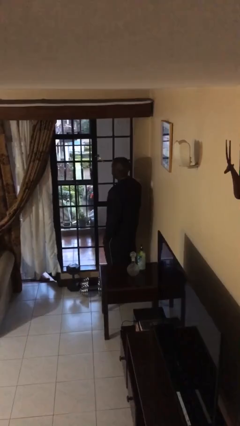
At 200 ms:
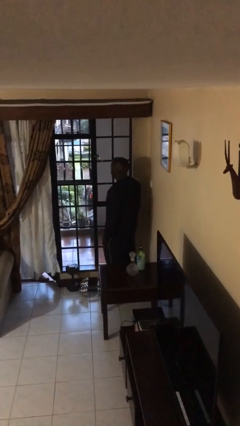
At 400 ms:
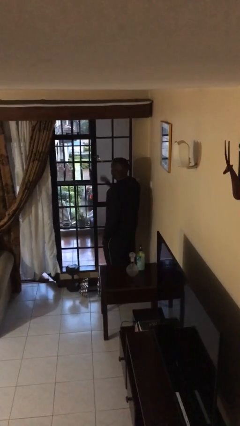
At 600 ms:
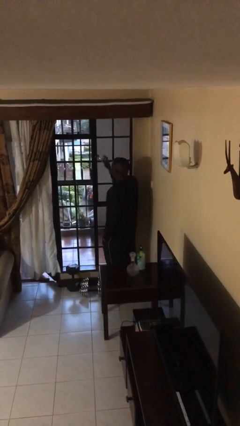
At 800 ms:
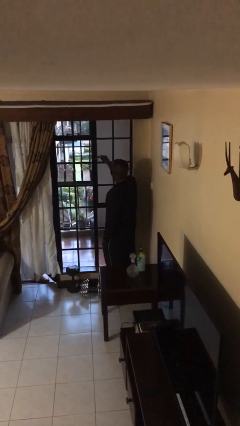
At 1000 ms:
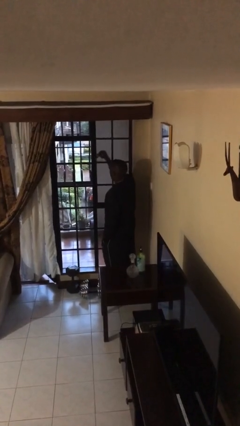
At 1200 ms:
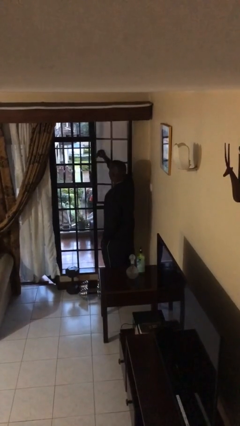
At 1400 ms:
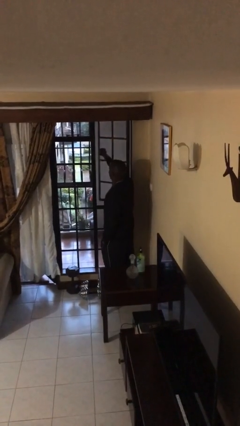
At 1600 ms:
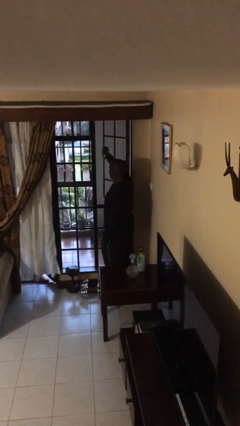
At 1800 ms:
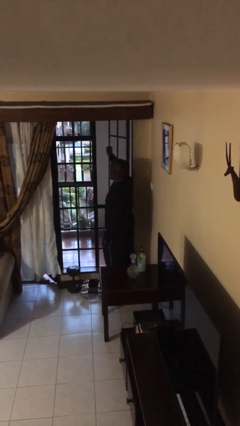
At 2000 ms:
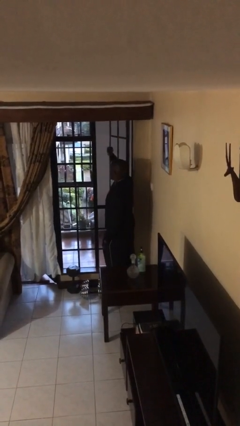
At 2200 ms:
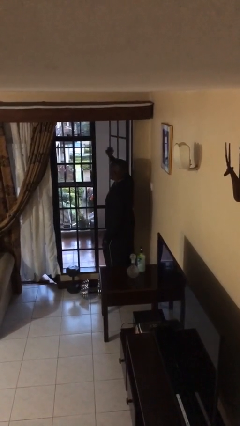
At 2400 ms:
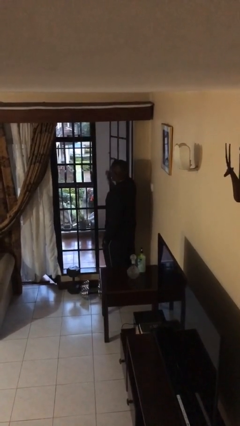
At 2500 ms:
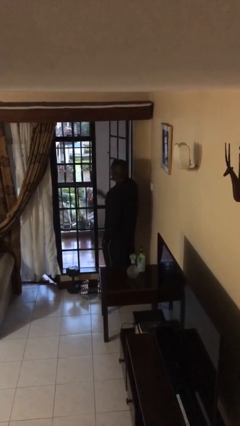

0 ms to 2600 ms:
person opens home window

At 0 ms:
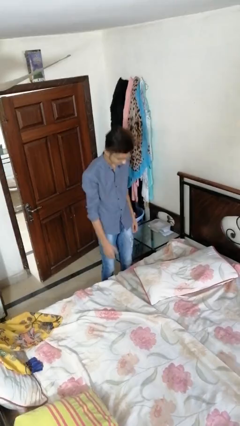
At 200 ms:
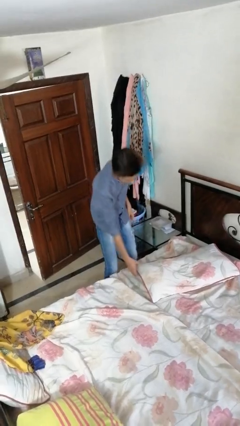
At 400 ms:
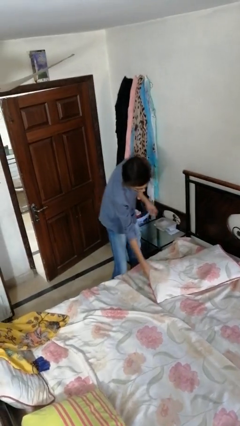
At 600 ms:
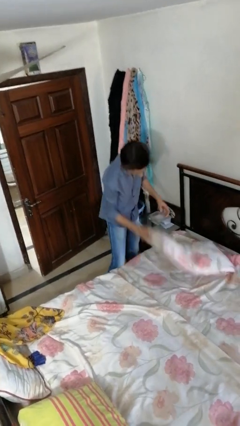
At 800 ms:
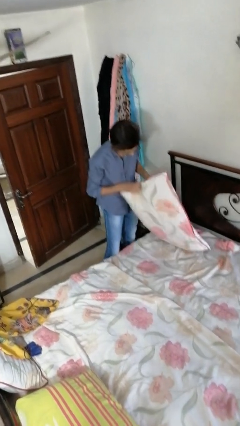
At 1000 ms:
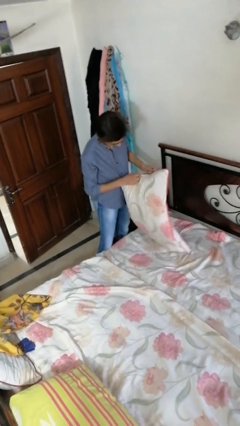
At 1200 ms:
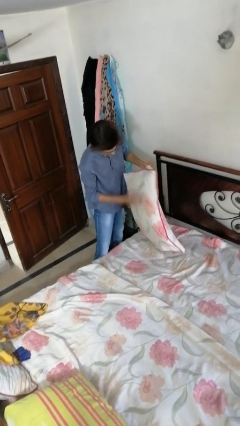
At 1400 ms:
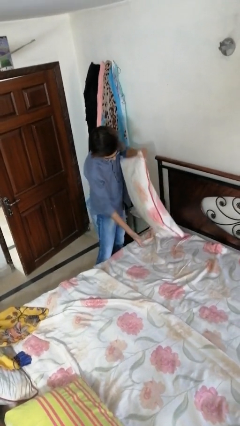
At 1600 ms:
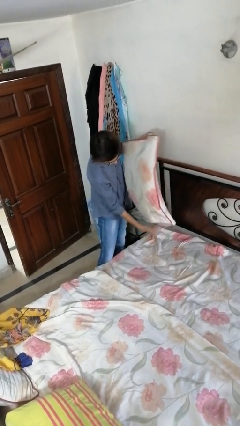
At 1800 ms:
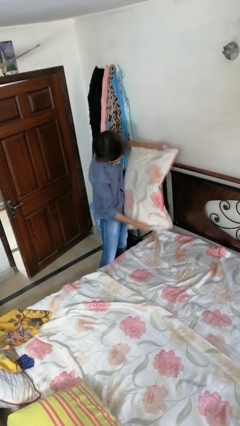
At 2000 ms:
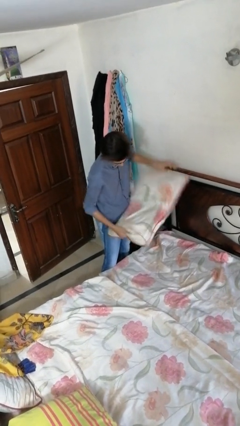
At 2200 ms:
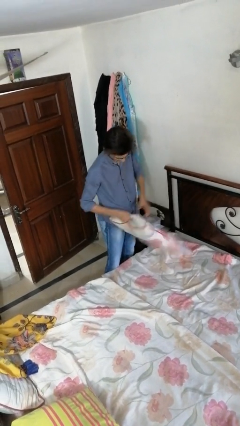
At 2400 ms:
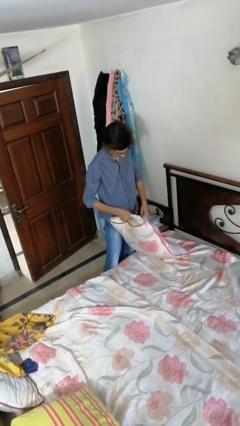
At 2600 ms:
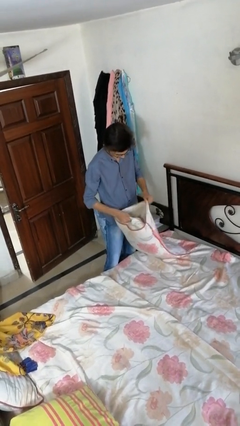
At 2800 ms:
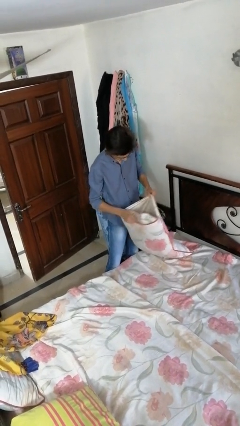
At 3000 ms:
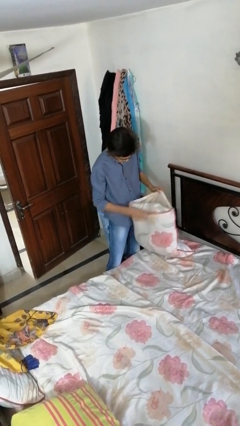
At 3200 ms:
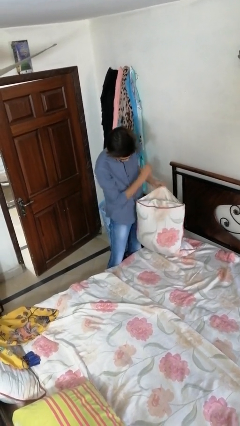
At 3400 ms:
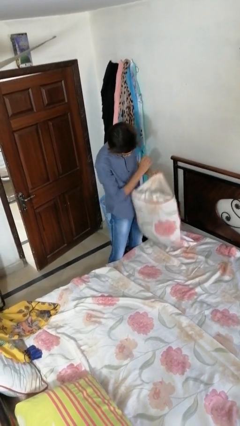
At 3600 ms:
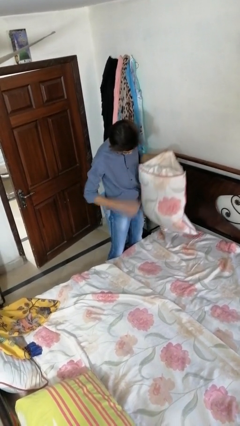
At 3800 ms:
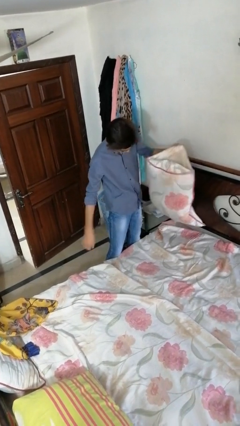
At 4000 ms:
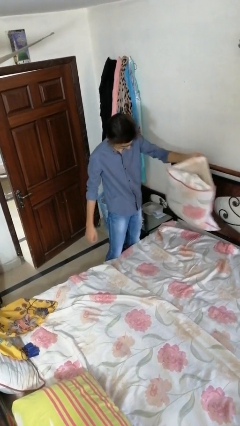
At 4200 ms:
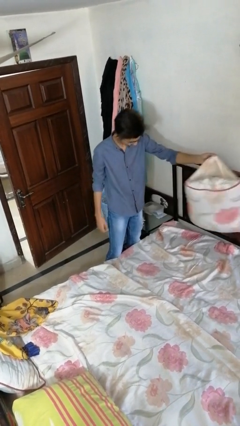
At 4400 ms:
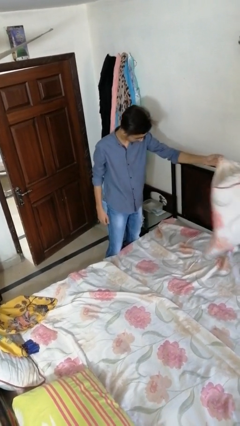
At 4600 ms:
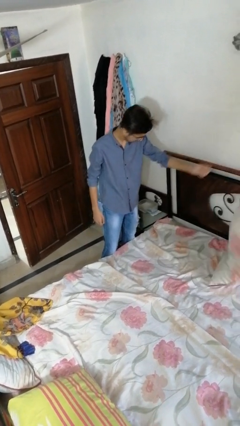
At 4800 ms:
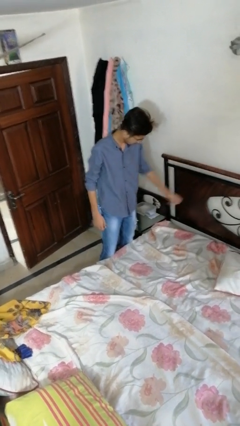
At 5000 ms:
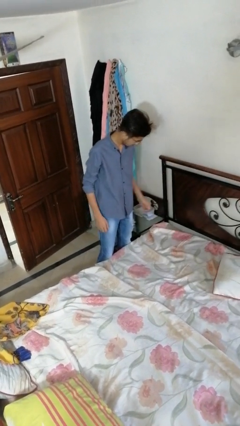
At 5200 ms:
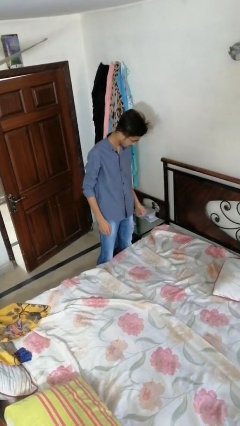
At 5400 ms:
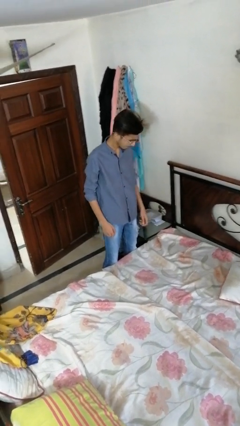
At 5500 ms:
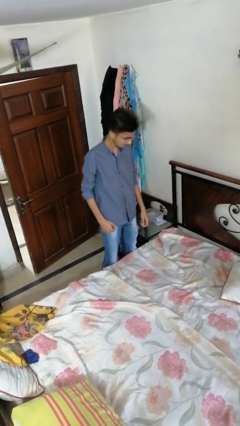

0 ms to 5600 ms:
person searches under bed

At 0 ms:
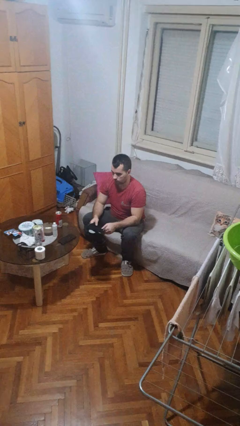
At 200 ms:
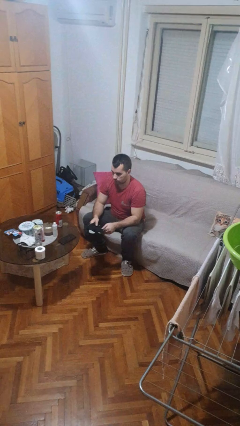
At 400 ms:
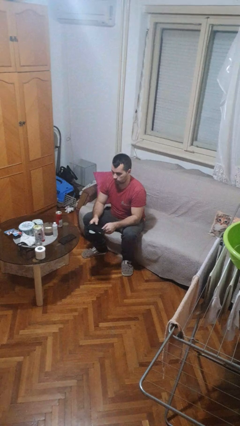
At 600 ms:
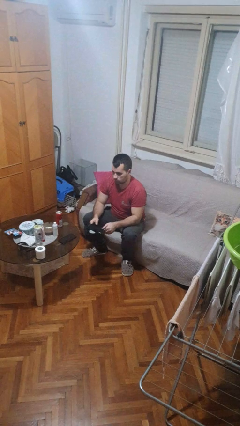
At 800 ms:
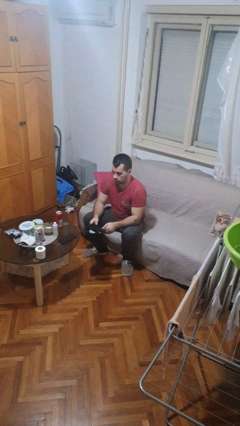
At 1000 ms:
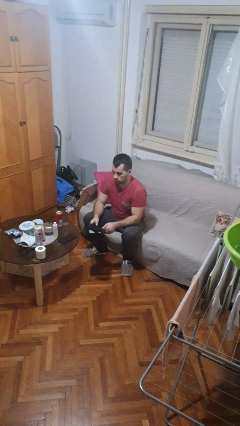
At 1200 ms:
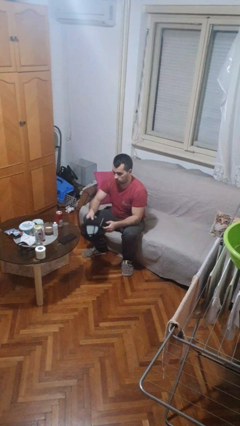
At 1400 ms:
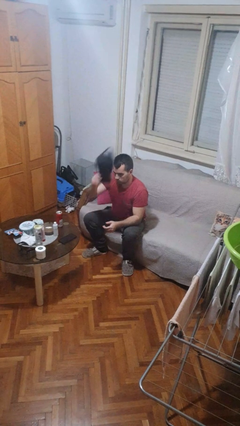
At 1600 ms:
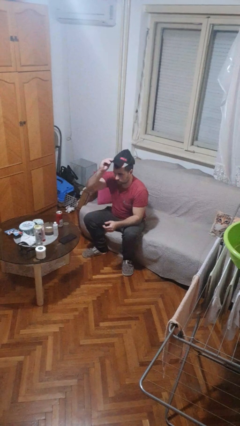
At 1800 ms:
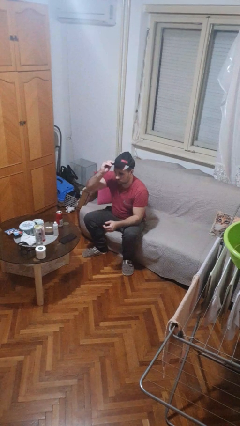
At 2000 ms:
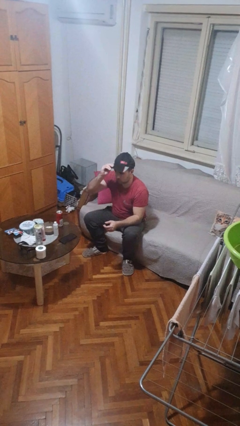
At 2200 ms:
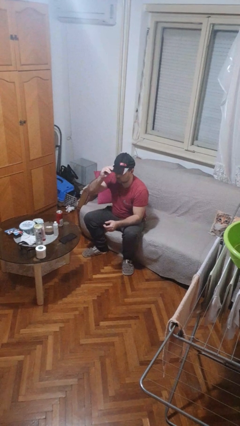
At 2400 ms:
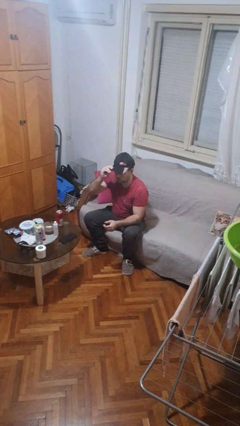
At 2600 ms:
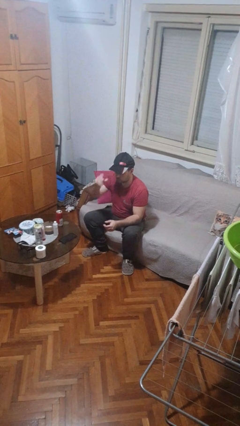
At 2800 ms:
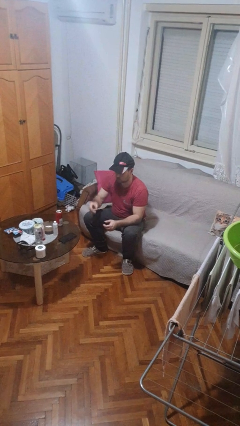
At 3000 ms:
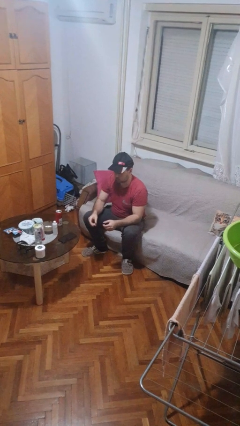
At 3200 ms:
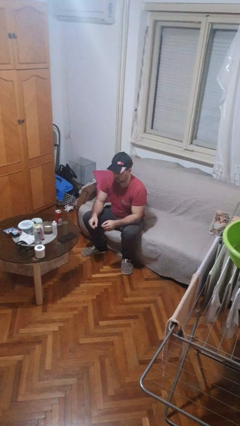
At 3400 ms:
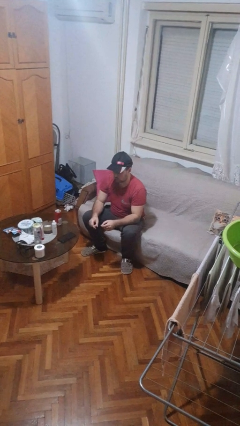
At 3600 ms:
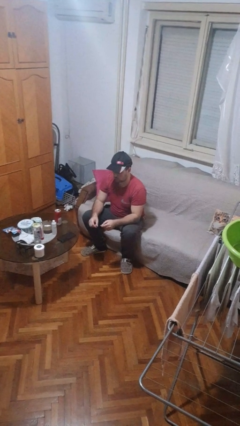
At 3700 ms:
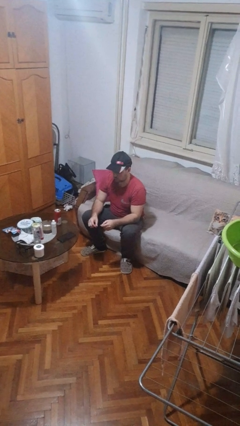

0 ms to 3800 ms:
person puts on hat

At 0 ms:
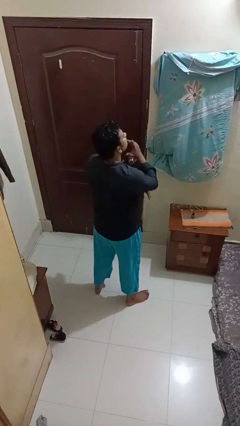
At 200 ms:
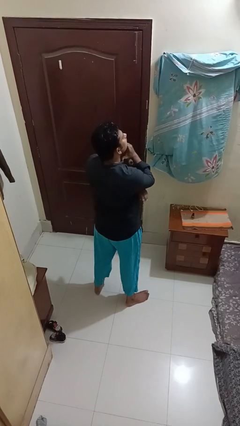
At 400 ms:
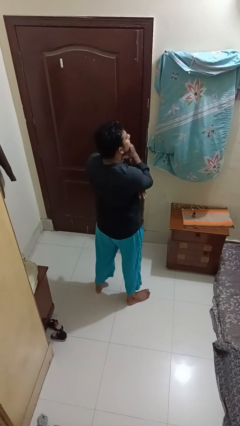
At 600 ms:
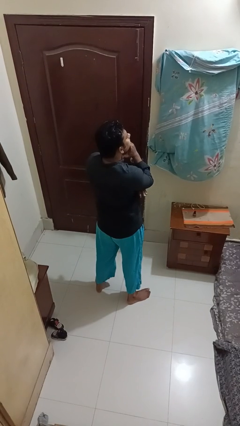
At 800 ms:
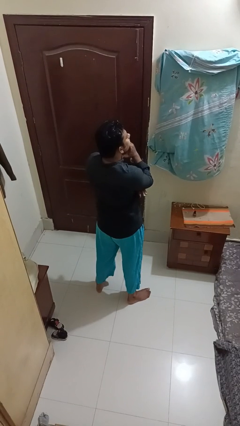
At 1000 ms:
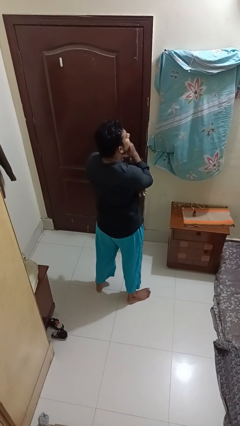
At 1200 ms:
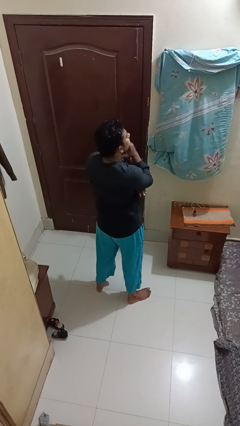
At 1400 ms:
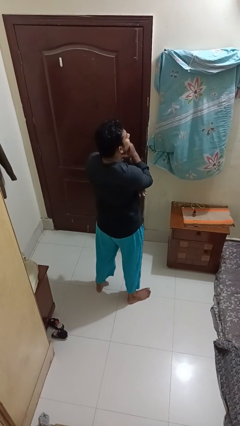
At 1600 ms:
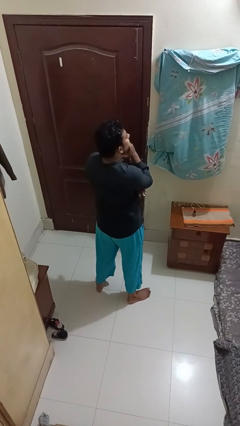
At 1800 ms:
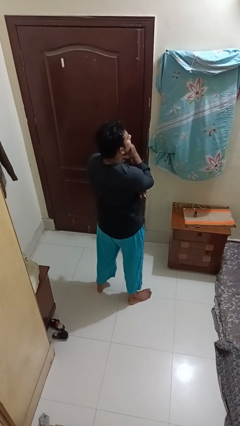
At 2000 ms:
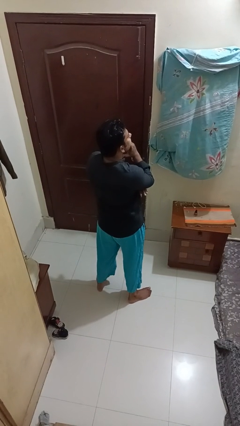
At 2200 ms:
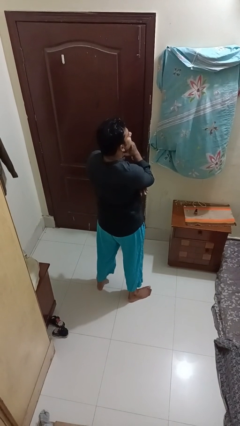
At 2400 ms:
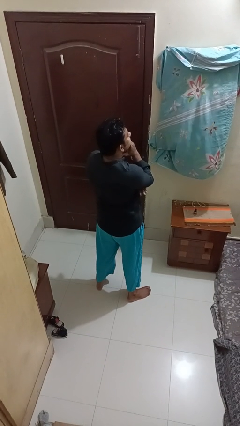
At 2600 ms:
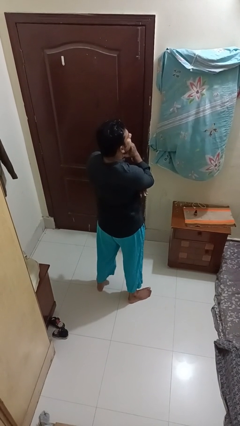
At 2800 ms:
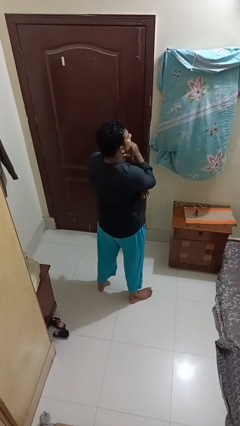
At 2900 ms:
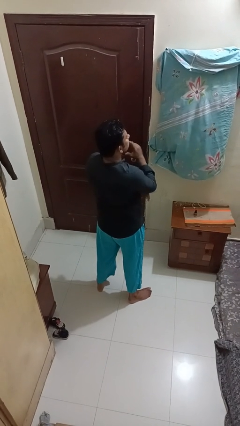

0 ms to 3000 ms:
person strokes chin

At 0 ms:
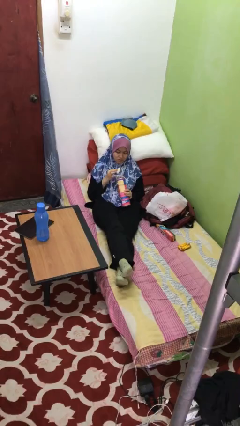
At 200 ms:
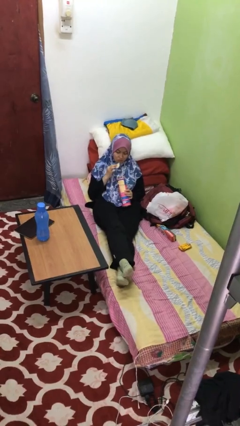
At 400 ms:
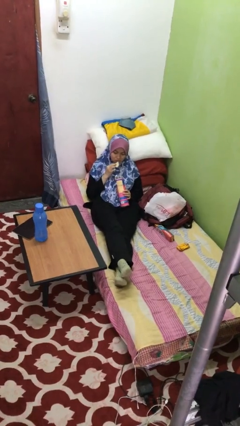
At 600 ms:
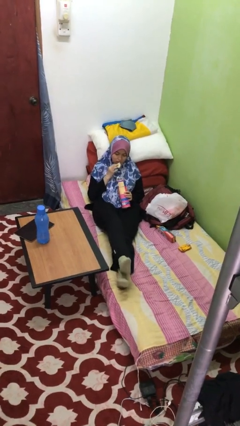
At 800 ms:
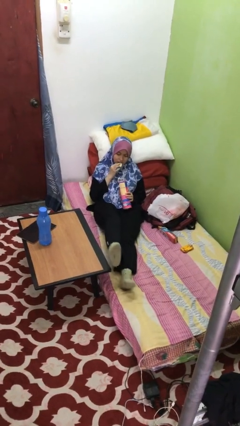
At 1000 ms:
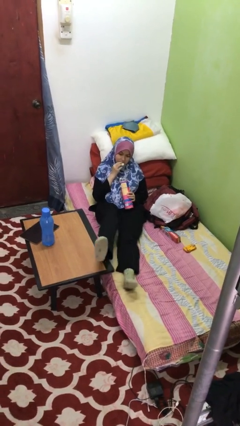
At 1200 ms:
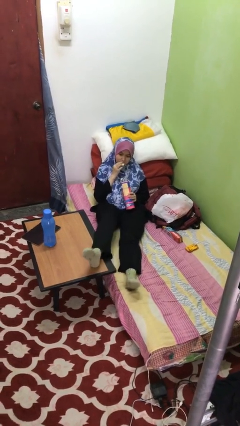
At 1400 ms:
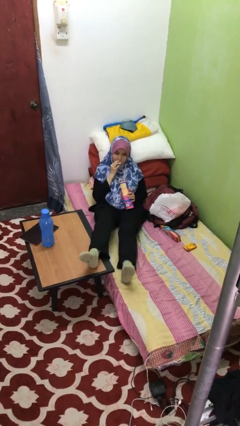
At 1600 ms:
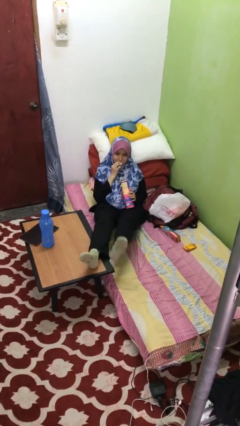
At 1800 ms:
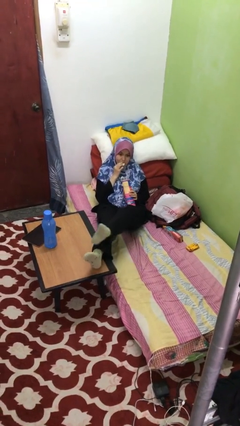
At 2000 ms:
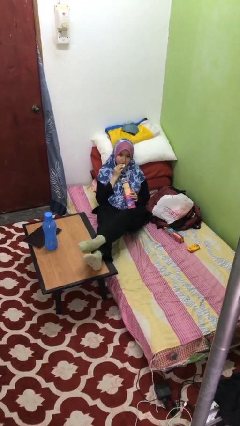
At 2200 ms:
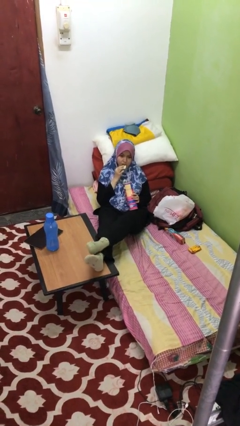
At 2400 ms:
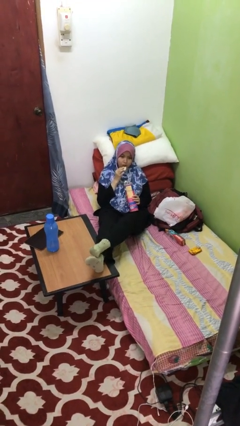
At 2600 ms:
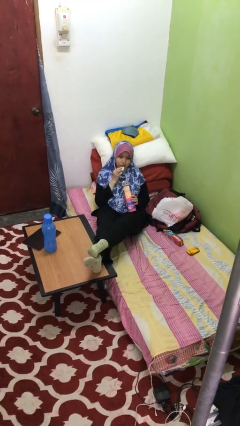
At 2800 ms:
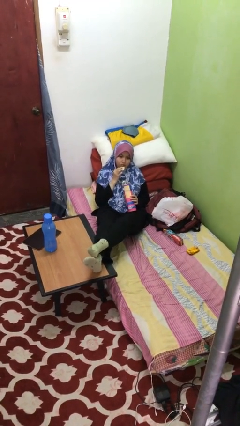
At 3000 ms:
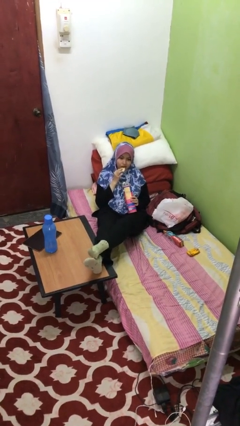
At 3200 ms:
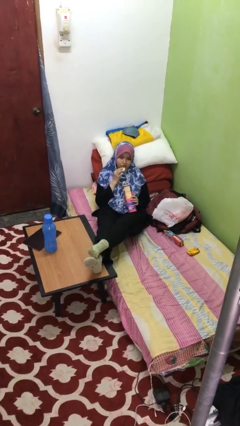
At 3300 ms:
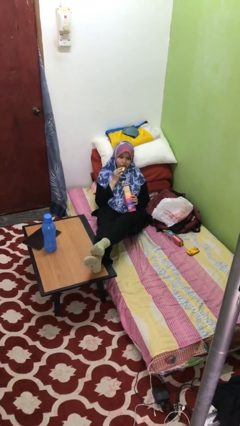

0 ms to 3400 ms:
person puts feet up
